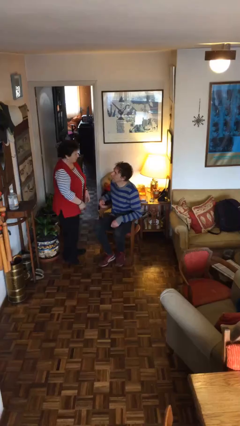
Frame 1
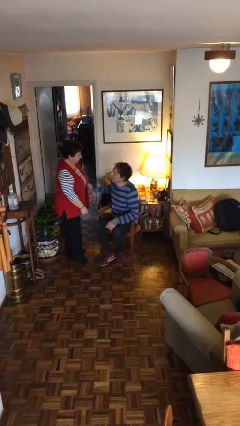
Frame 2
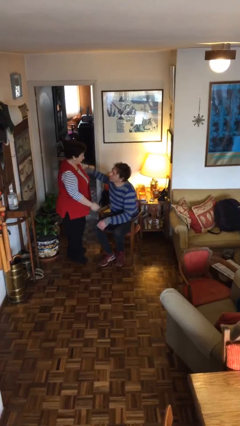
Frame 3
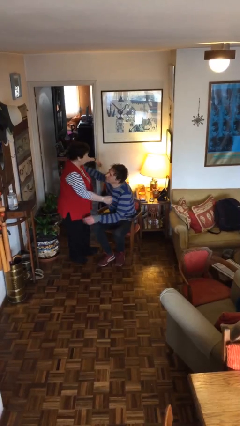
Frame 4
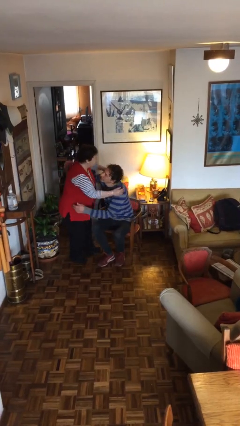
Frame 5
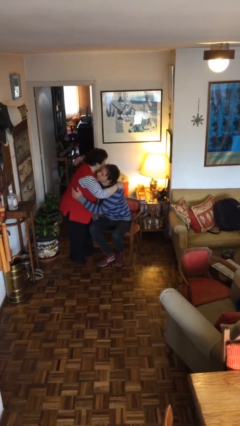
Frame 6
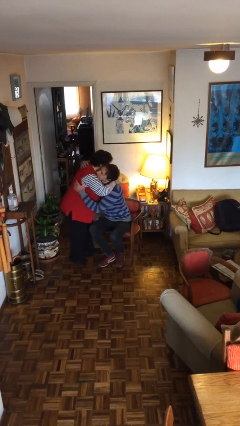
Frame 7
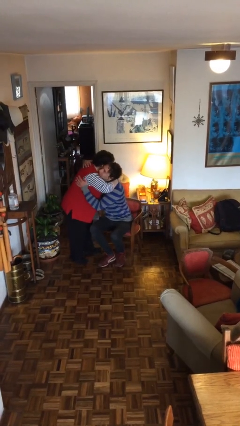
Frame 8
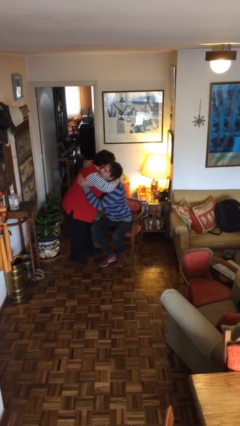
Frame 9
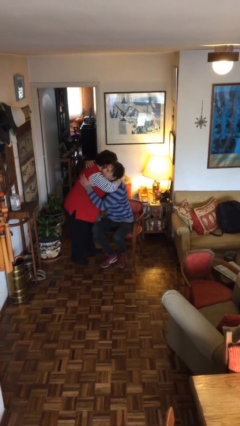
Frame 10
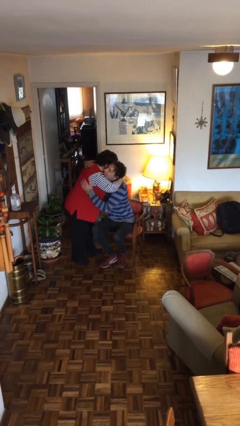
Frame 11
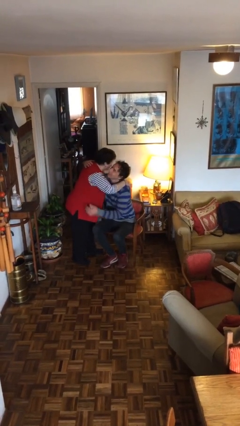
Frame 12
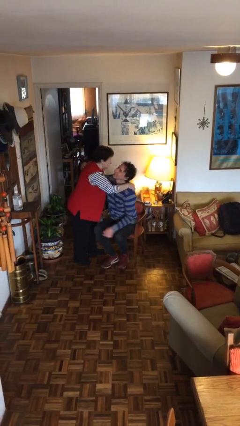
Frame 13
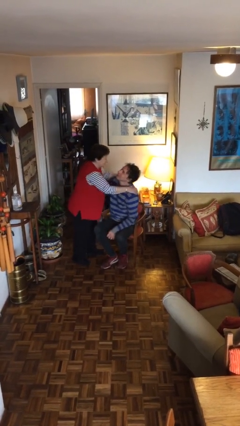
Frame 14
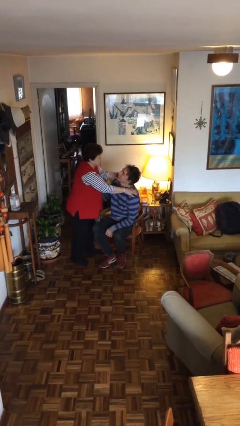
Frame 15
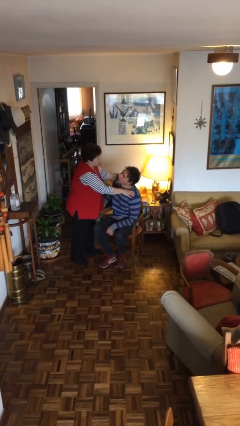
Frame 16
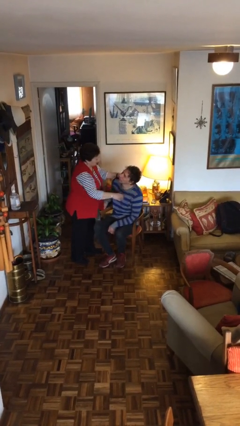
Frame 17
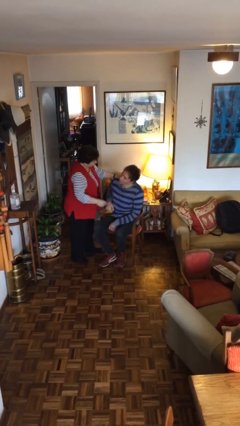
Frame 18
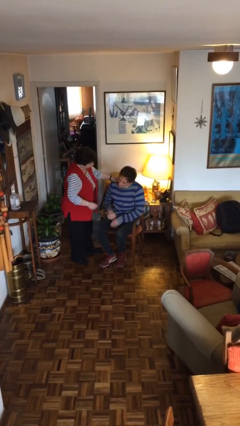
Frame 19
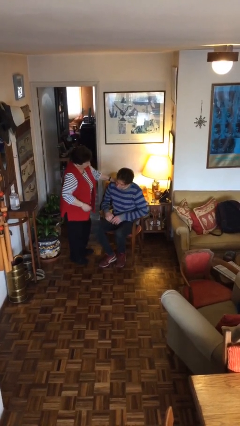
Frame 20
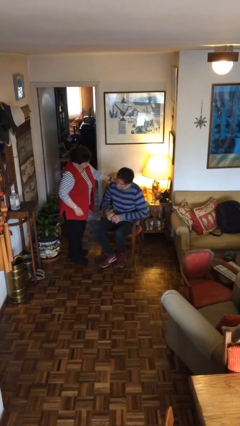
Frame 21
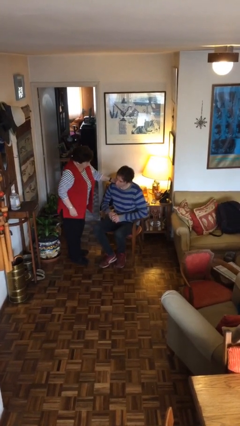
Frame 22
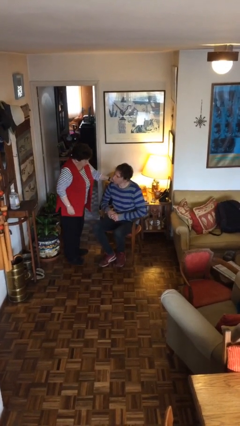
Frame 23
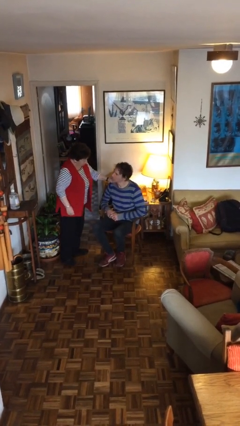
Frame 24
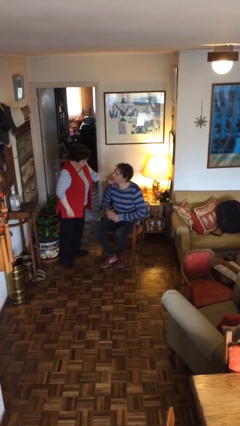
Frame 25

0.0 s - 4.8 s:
person embraces person

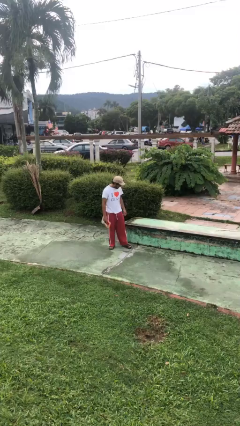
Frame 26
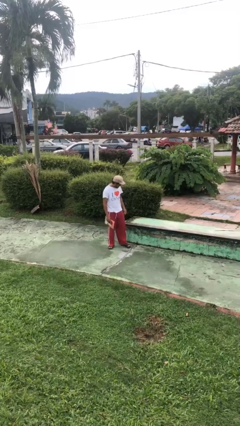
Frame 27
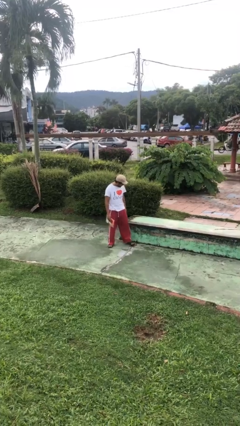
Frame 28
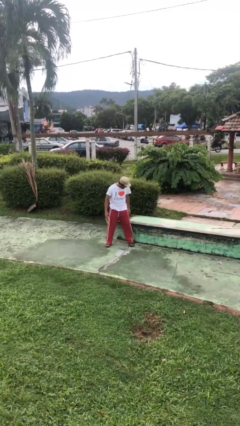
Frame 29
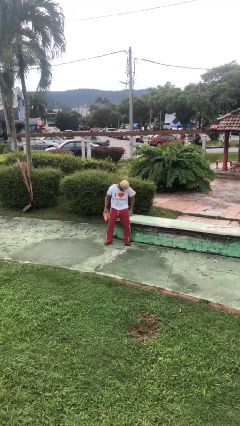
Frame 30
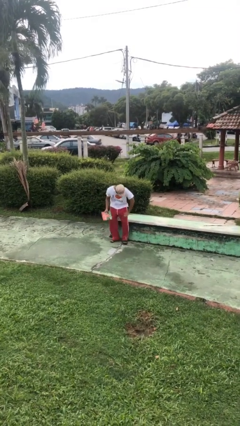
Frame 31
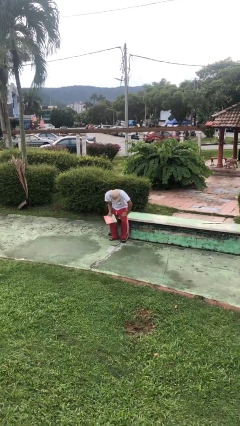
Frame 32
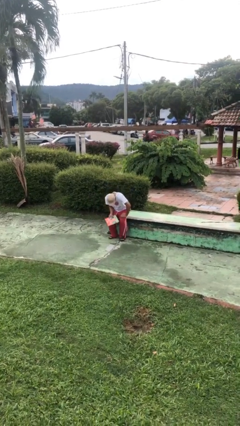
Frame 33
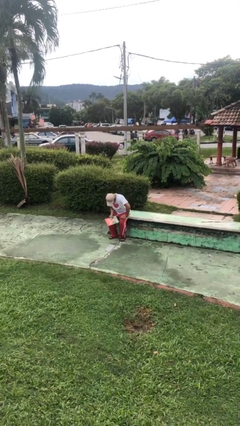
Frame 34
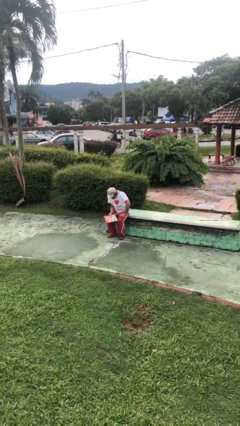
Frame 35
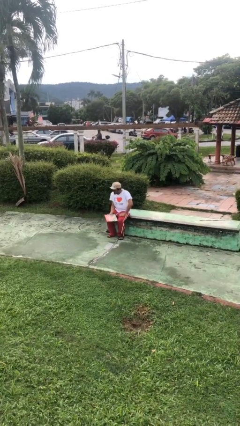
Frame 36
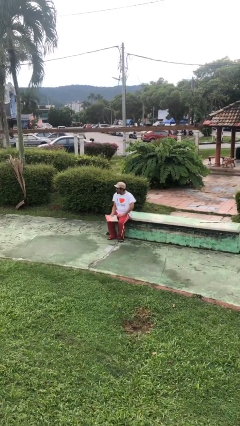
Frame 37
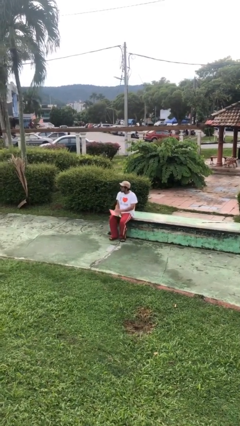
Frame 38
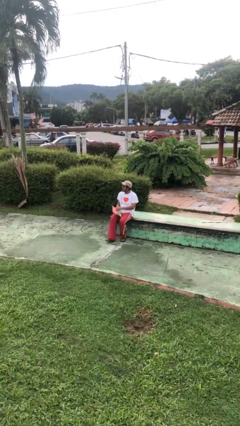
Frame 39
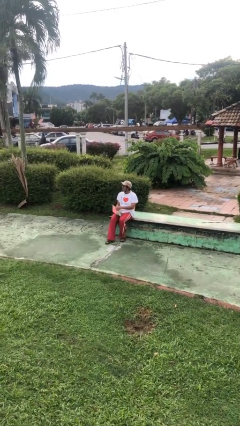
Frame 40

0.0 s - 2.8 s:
person sits down

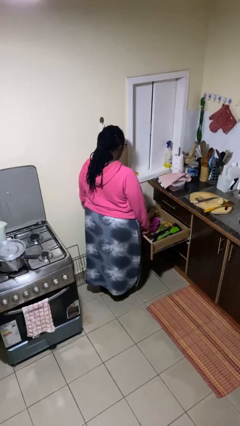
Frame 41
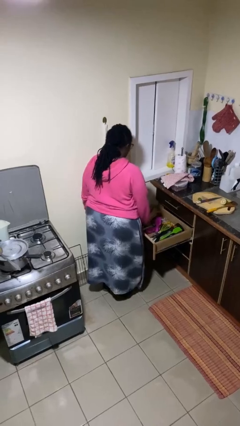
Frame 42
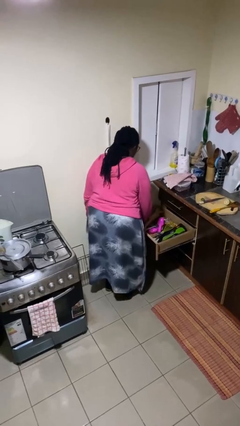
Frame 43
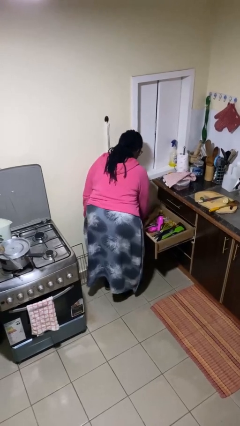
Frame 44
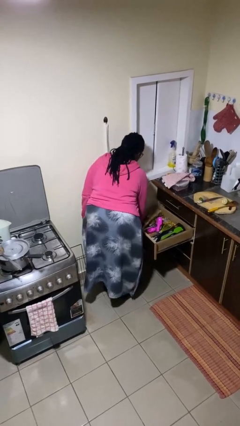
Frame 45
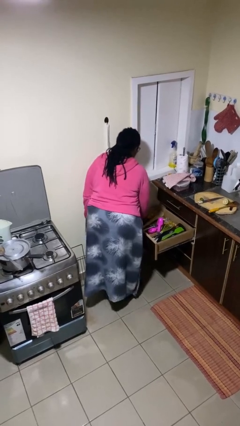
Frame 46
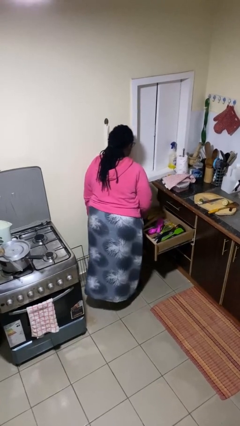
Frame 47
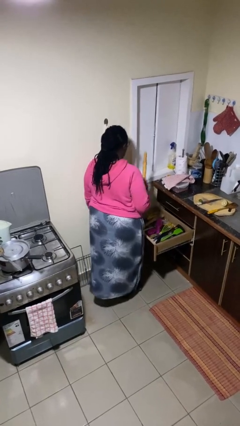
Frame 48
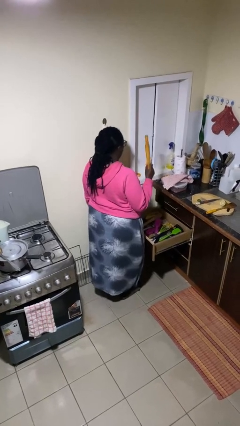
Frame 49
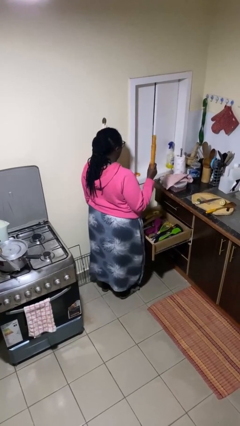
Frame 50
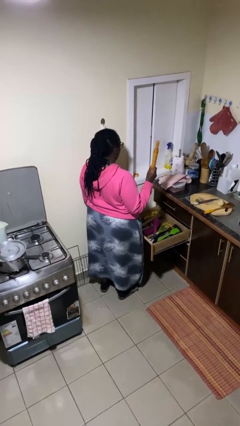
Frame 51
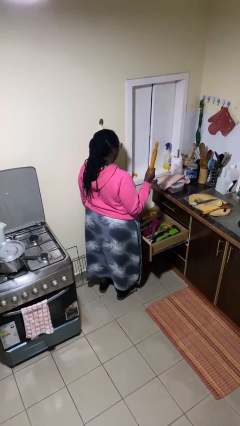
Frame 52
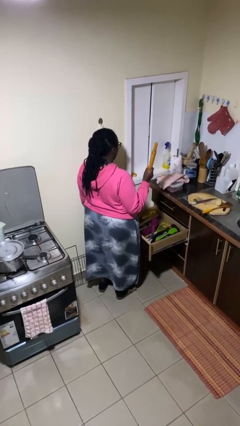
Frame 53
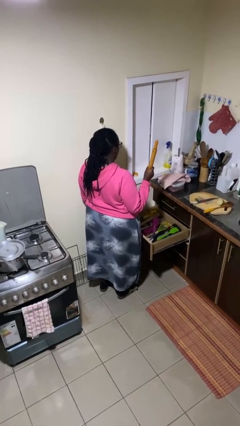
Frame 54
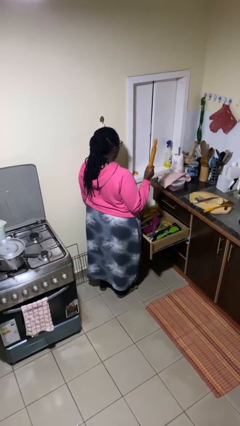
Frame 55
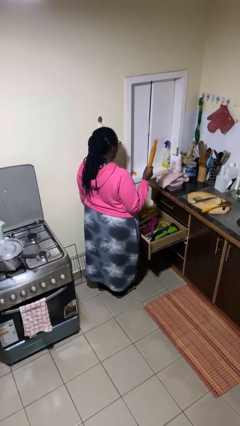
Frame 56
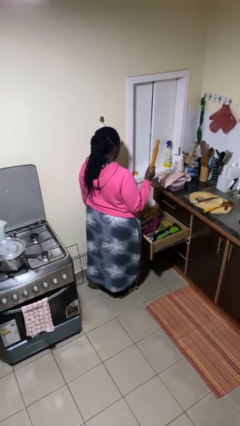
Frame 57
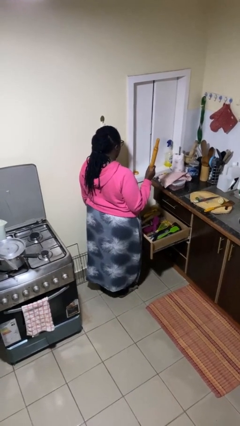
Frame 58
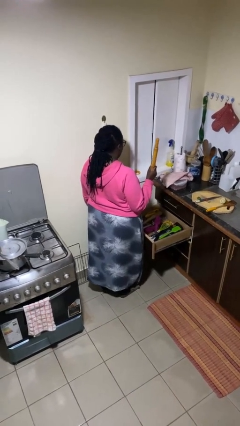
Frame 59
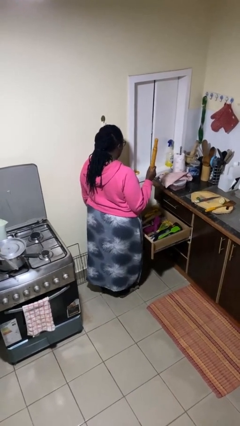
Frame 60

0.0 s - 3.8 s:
person takes object from kitchen drawer

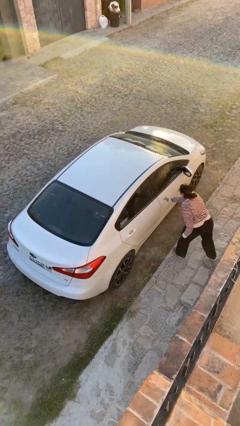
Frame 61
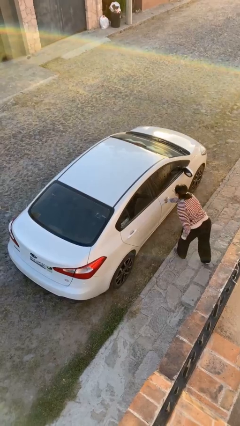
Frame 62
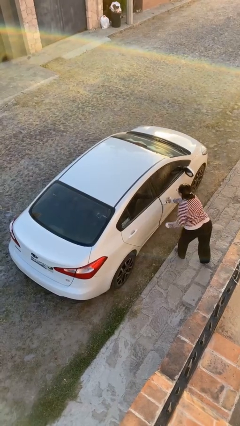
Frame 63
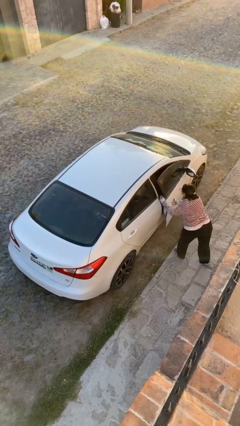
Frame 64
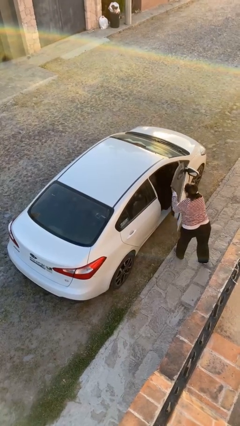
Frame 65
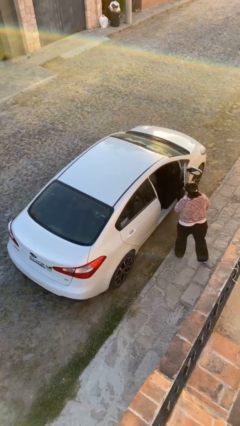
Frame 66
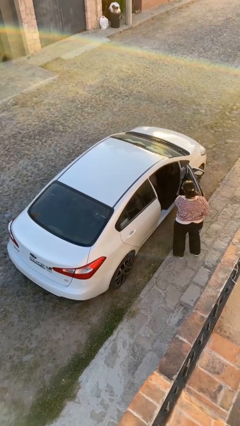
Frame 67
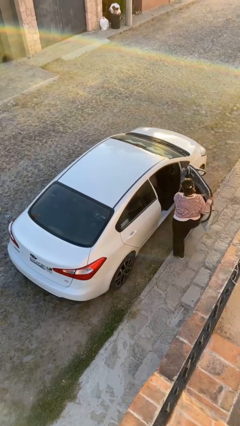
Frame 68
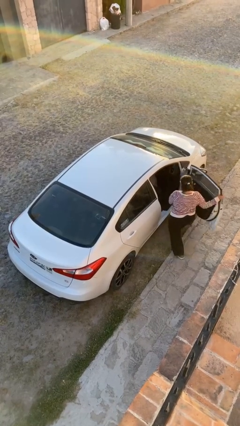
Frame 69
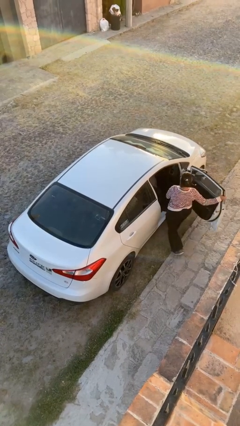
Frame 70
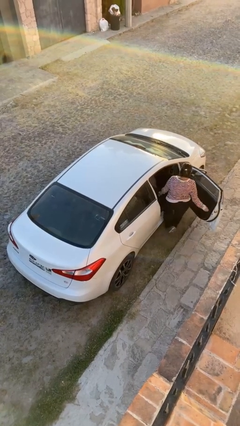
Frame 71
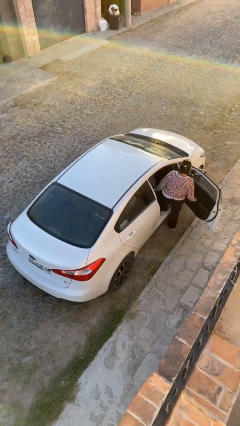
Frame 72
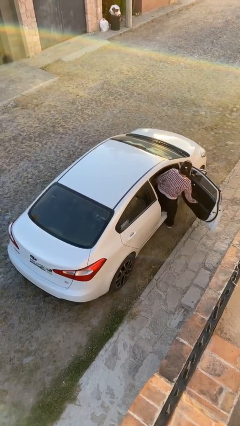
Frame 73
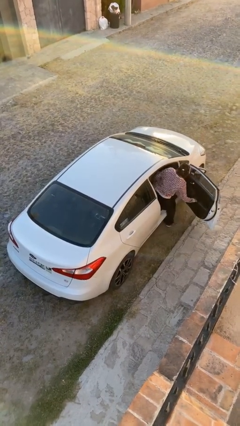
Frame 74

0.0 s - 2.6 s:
car picks up person

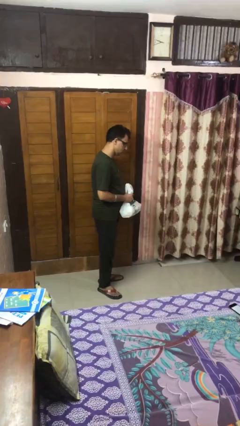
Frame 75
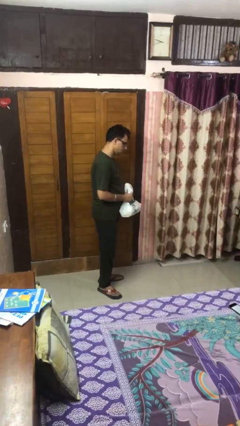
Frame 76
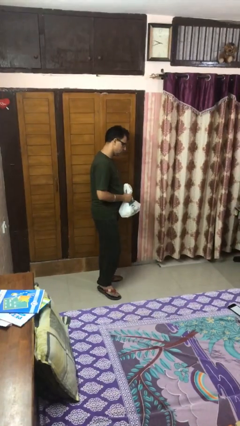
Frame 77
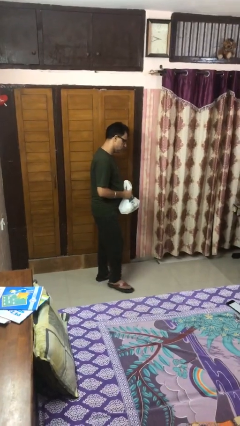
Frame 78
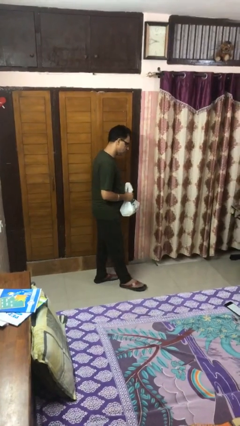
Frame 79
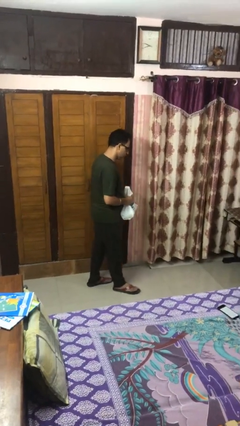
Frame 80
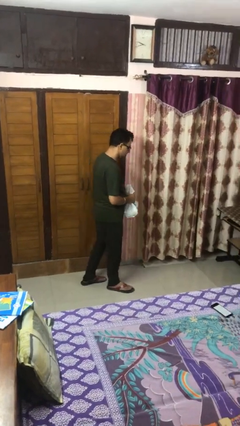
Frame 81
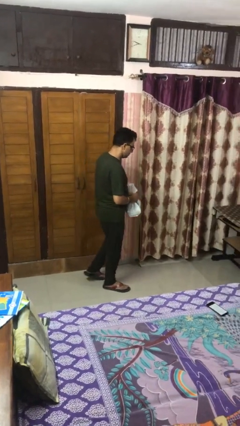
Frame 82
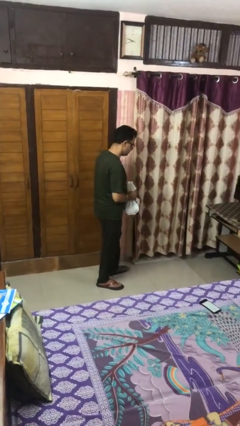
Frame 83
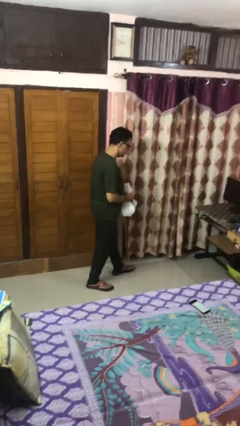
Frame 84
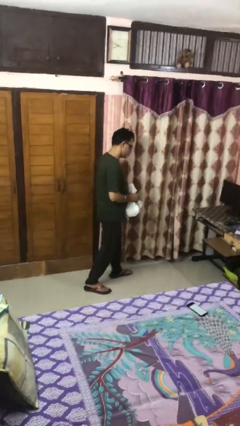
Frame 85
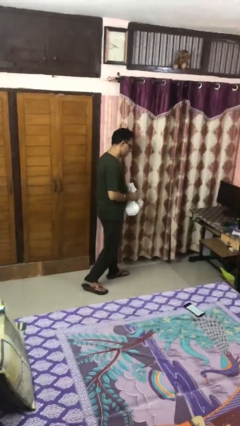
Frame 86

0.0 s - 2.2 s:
person carries groceries

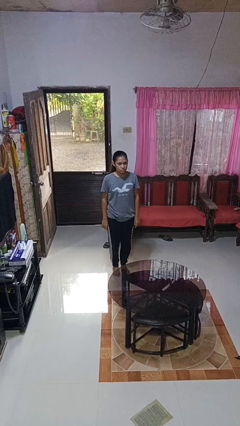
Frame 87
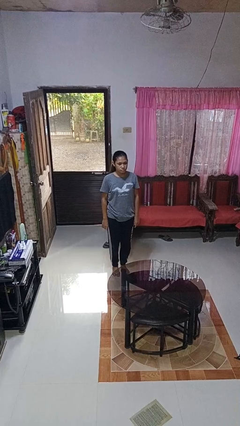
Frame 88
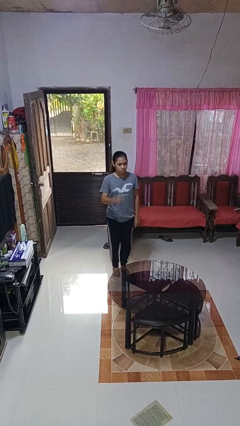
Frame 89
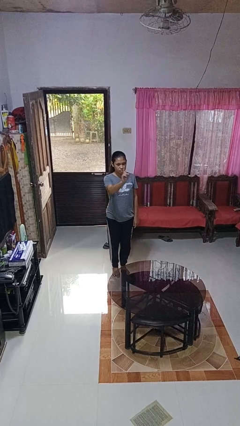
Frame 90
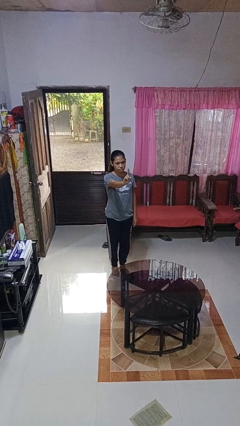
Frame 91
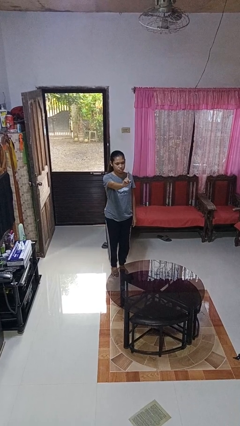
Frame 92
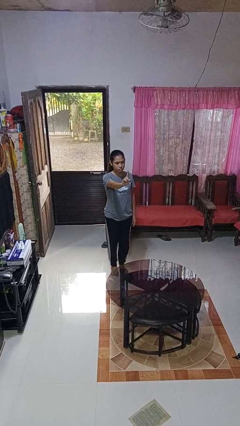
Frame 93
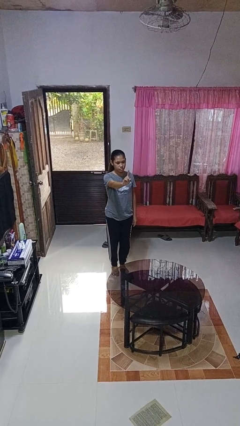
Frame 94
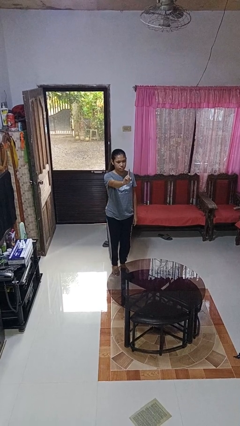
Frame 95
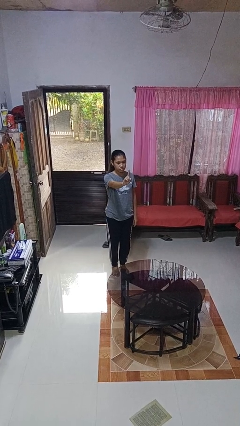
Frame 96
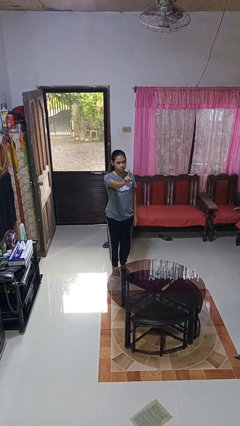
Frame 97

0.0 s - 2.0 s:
person gestures number one
